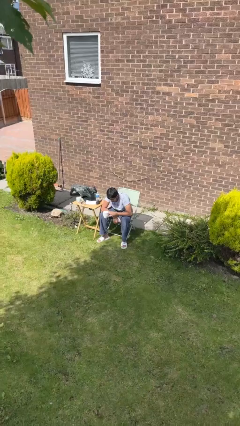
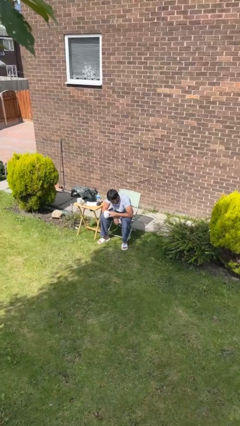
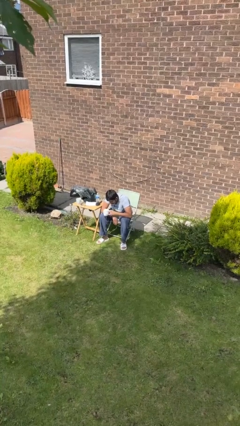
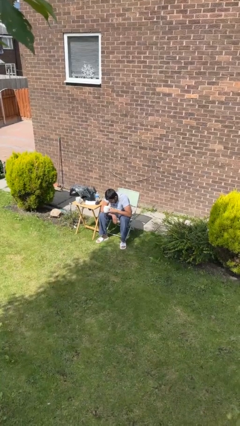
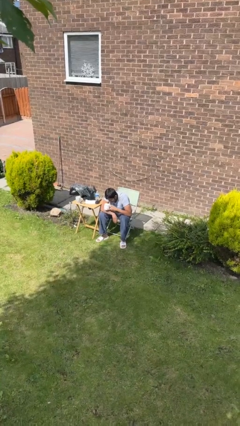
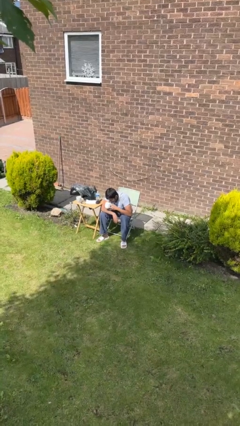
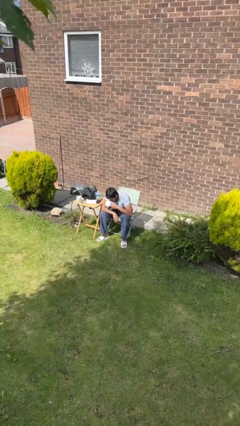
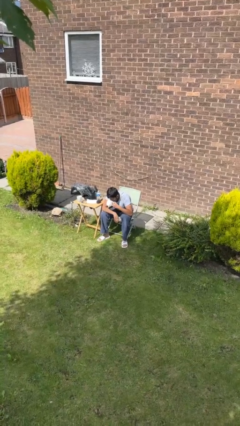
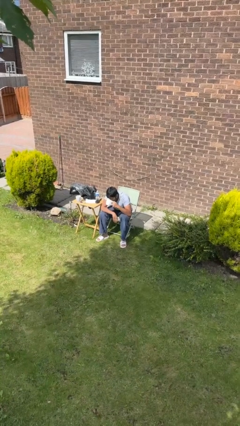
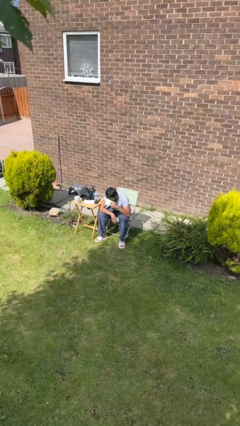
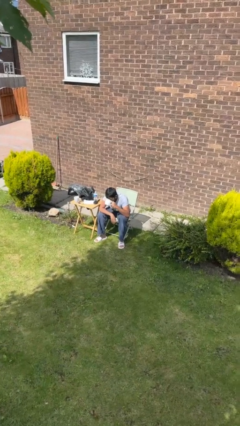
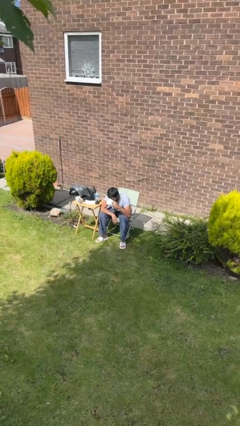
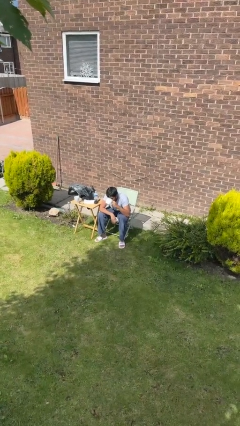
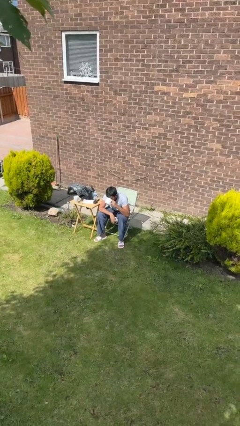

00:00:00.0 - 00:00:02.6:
person drinks from mug

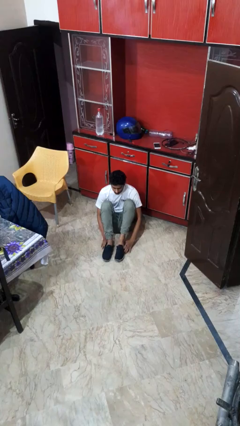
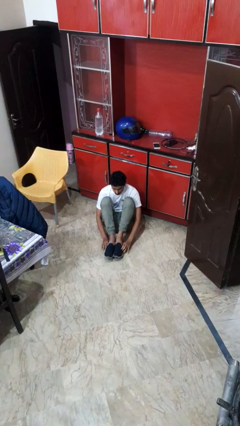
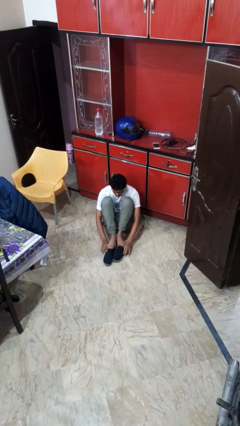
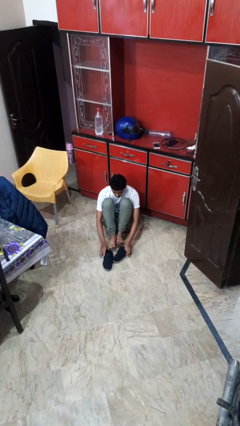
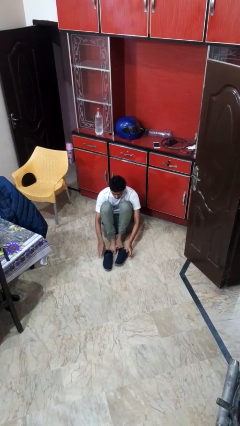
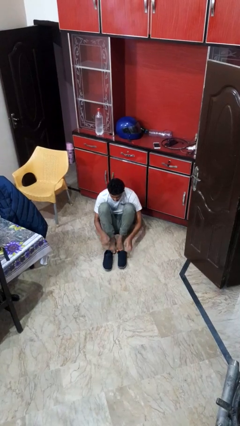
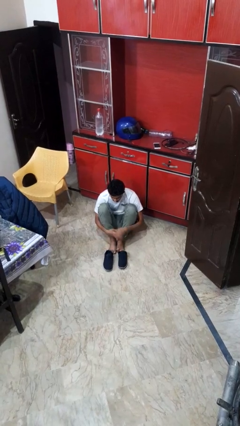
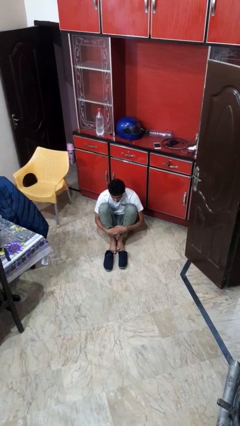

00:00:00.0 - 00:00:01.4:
person takes off shoes

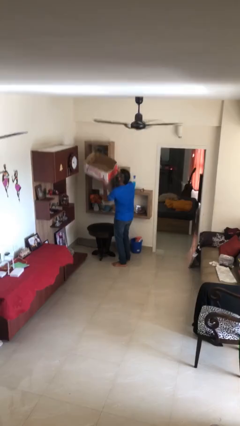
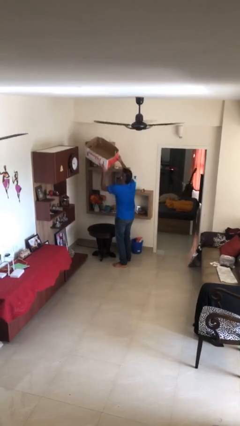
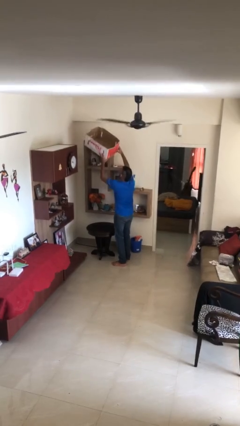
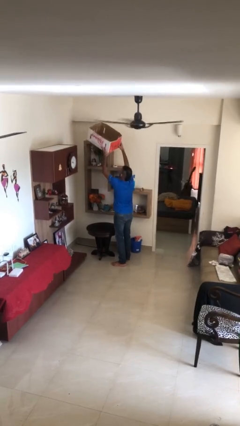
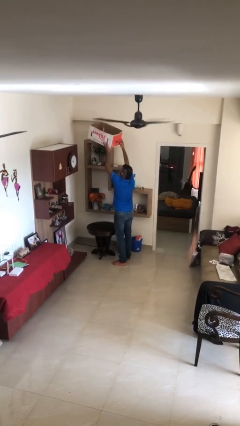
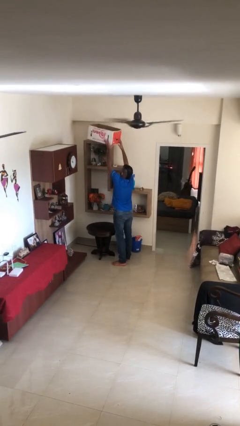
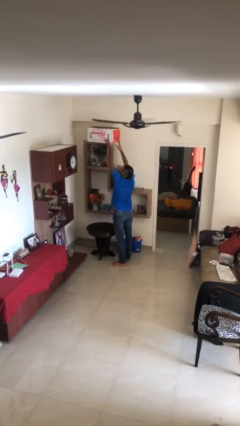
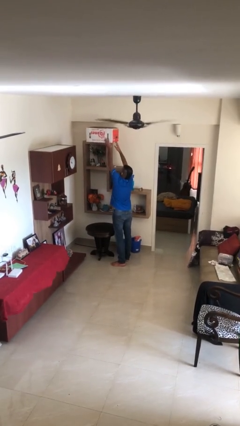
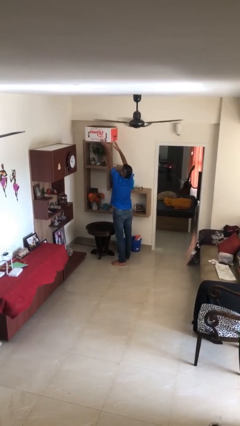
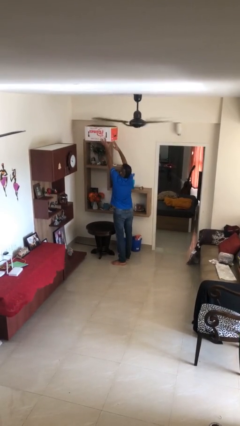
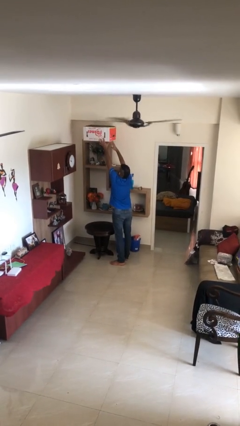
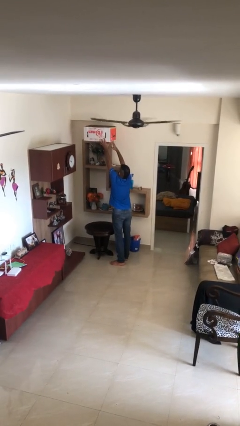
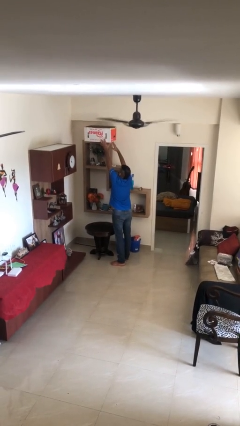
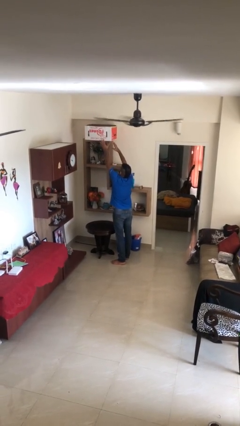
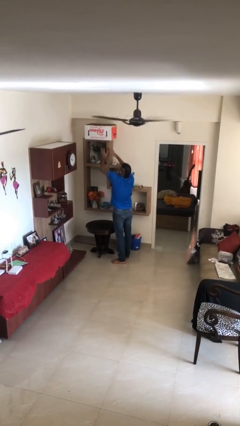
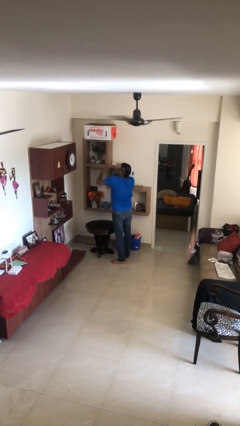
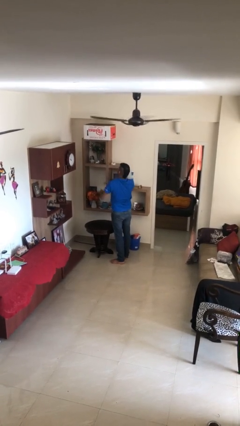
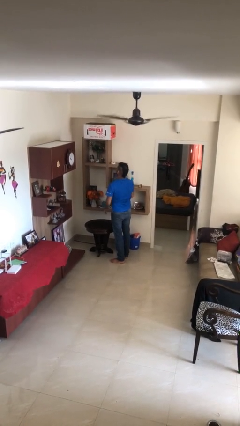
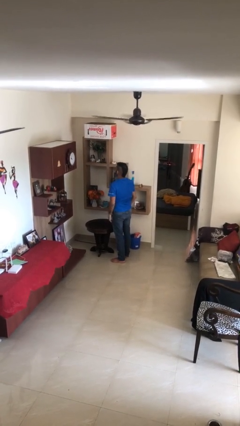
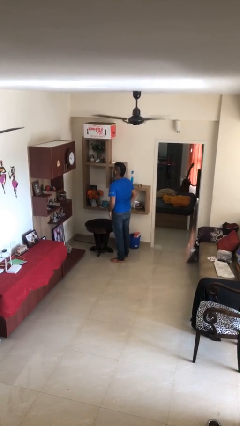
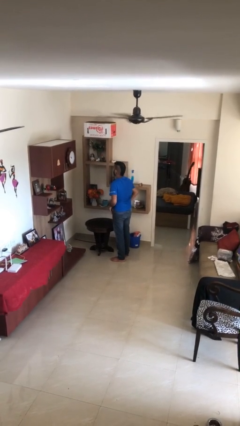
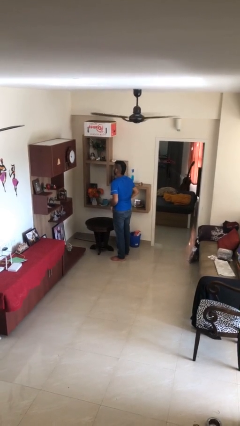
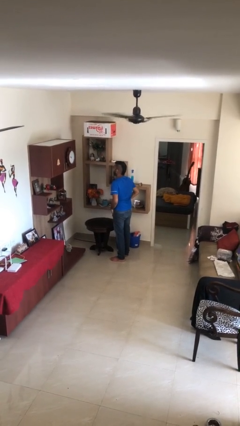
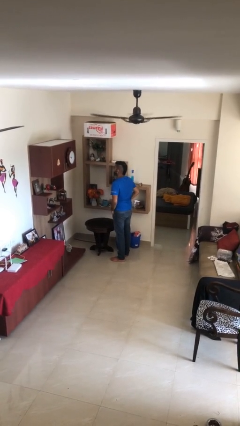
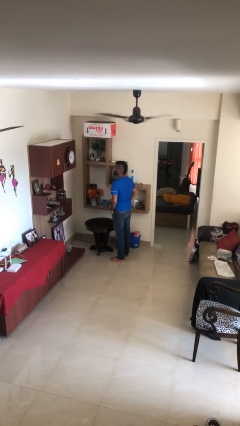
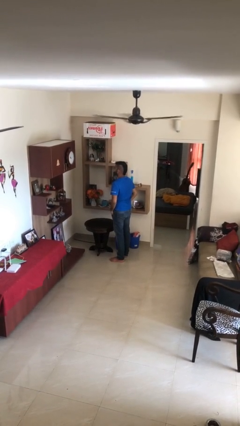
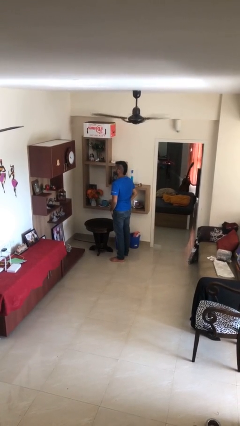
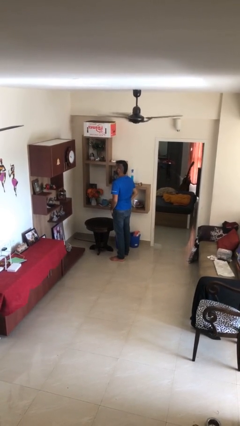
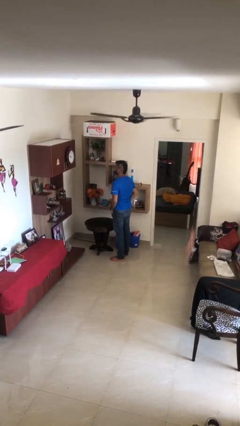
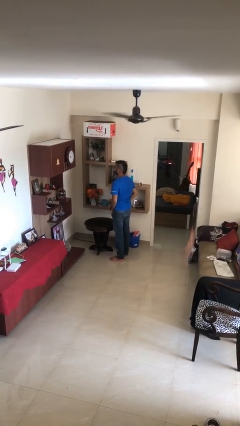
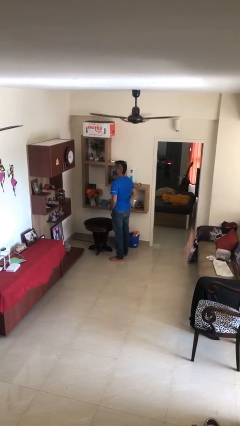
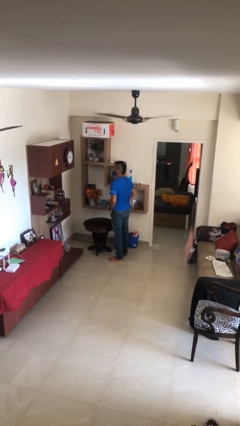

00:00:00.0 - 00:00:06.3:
person puts down object on shelf

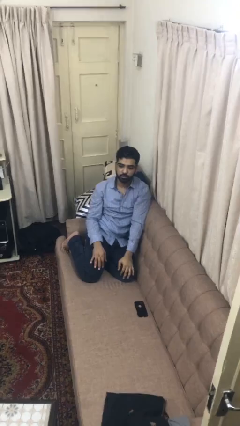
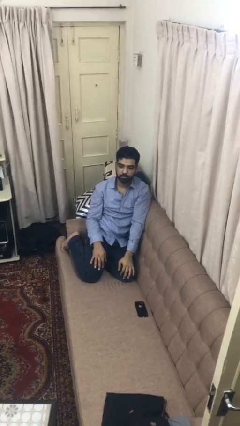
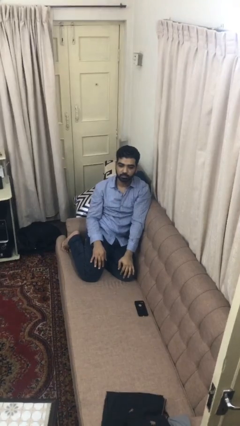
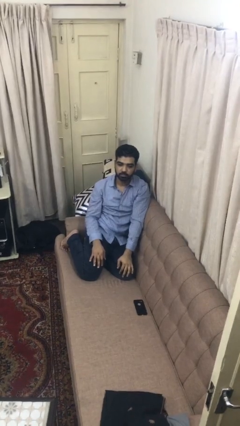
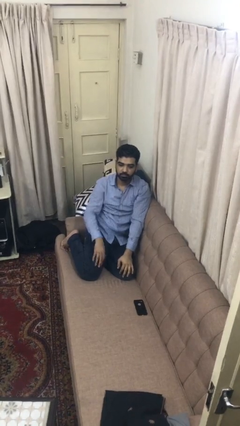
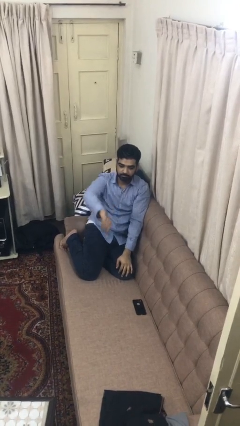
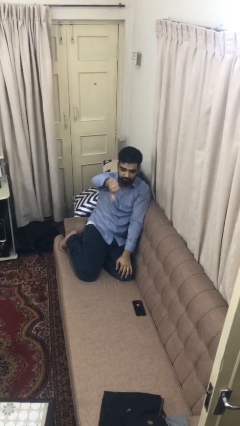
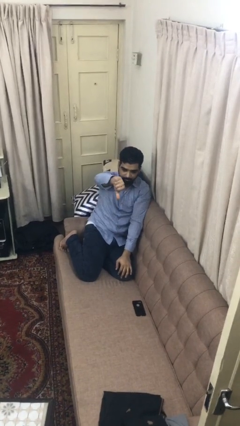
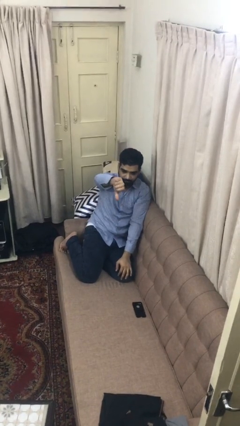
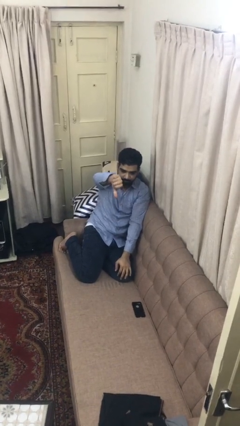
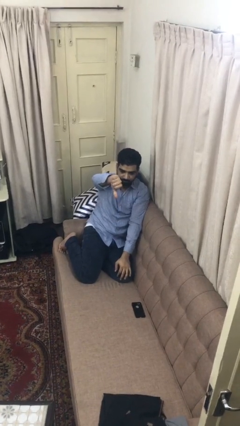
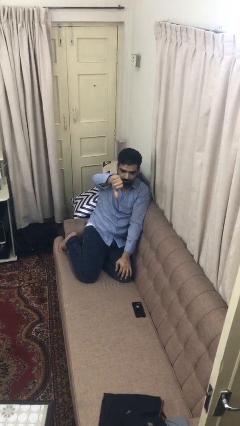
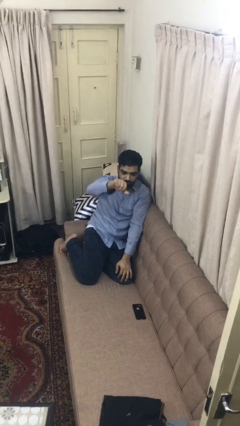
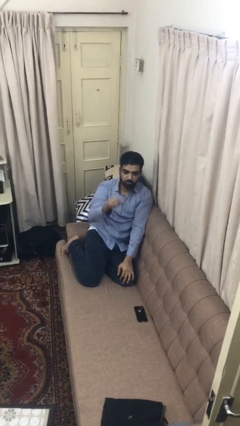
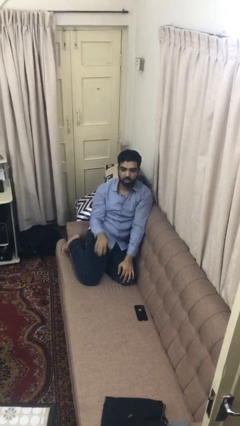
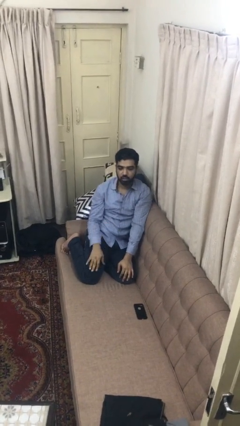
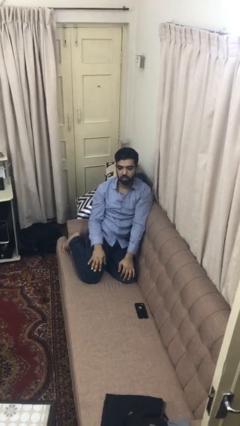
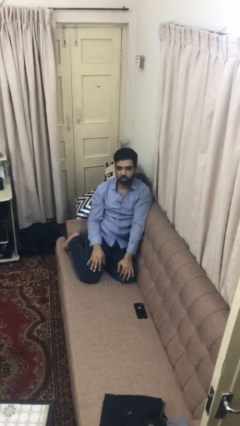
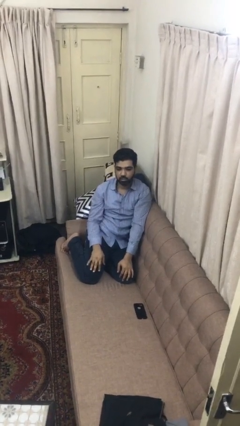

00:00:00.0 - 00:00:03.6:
person gestures thumbs down

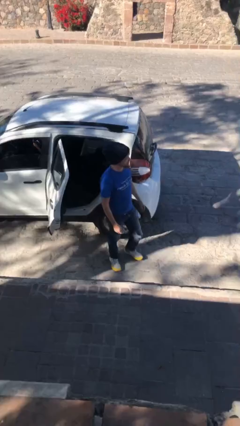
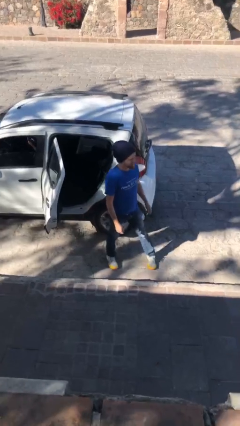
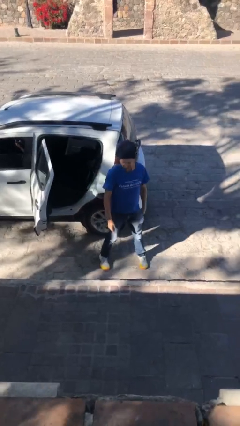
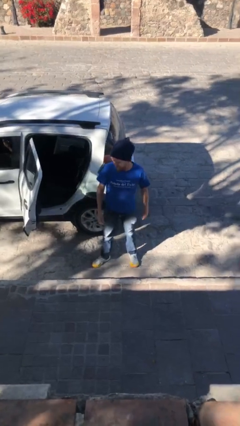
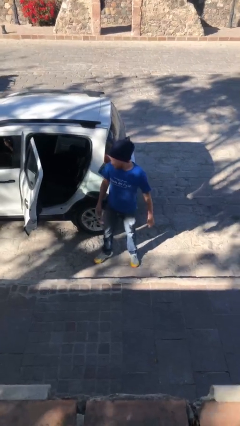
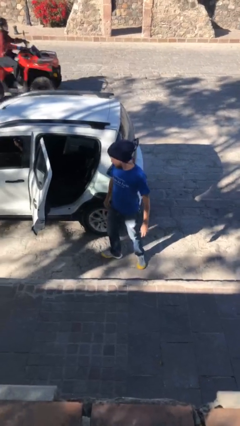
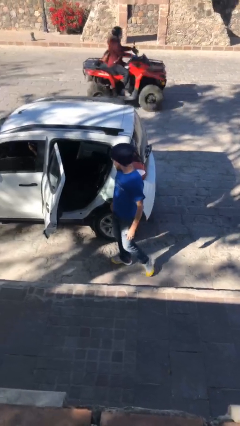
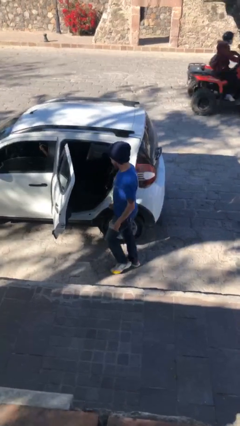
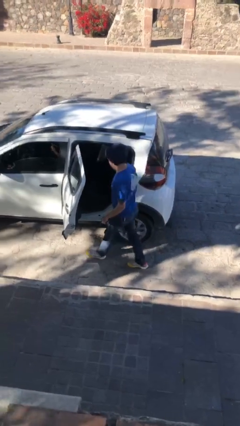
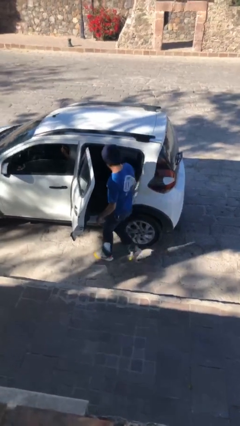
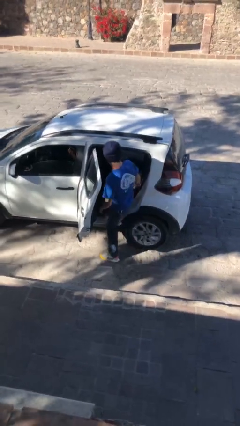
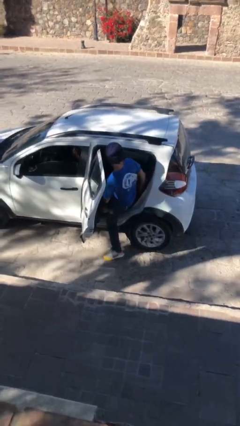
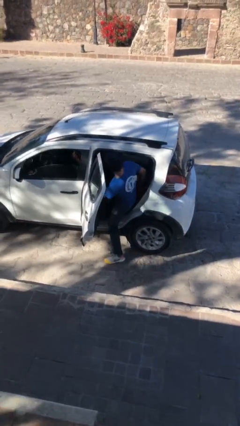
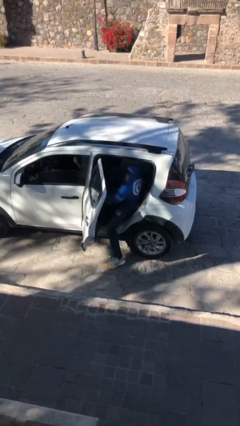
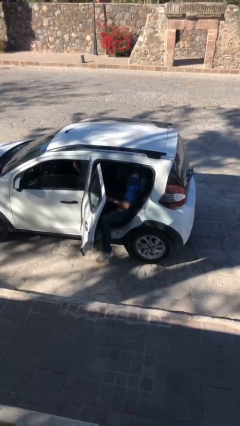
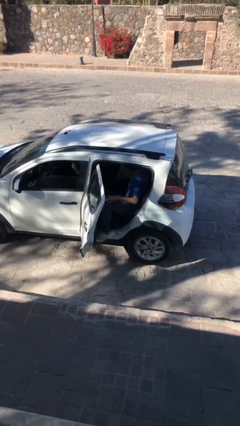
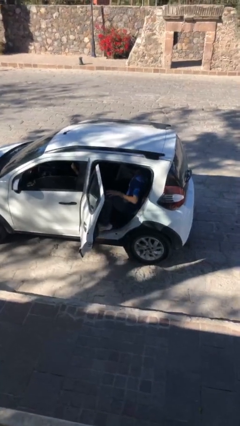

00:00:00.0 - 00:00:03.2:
person enters car

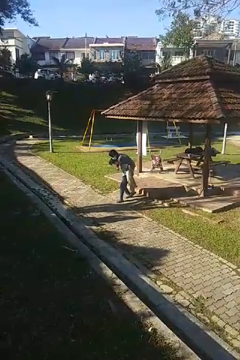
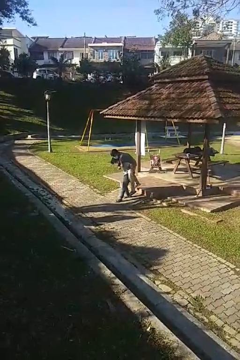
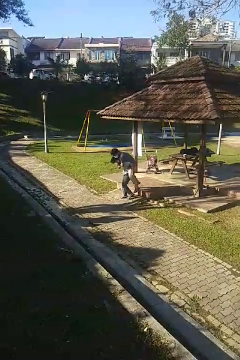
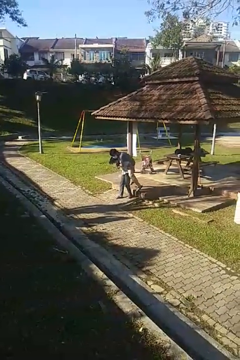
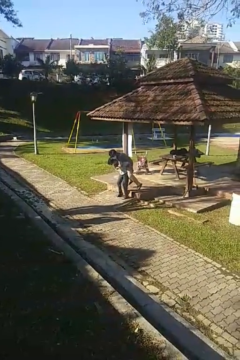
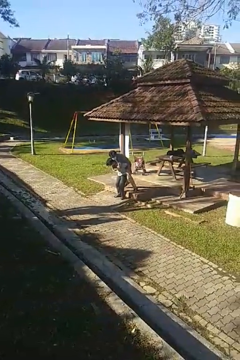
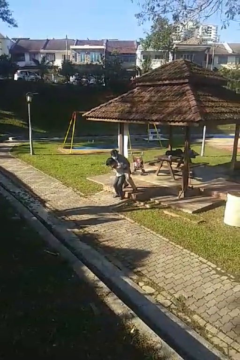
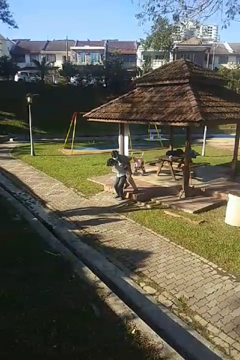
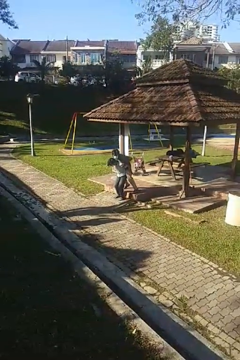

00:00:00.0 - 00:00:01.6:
person puts down person
